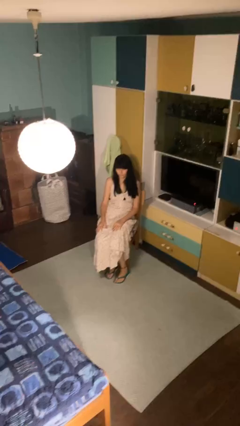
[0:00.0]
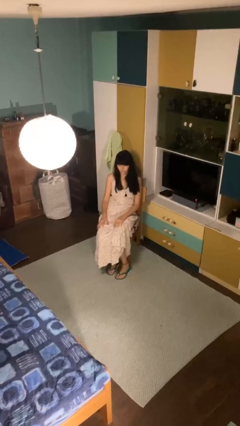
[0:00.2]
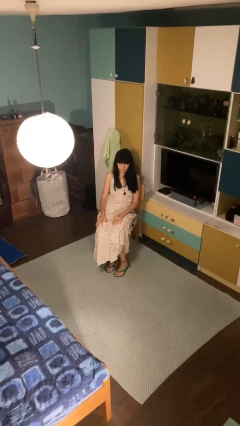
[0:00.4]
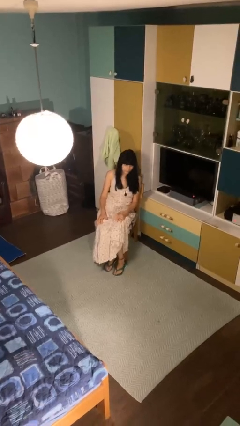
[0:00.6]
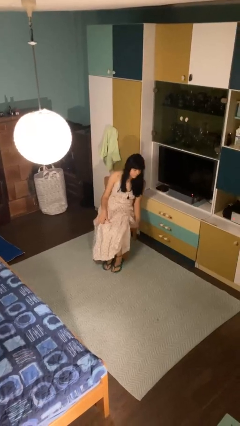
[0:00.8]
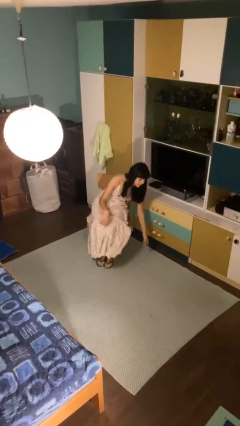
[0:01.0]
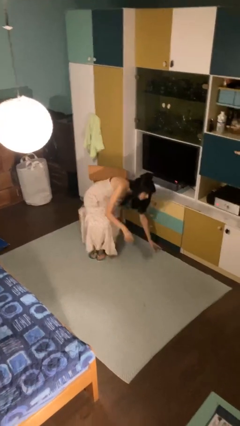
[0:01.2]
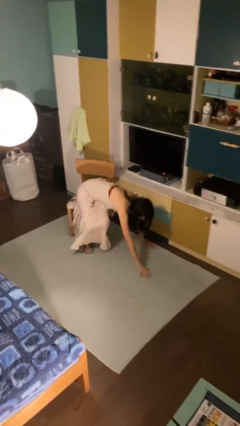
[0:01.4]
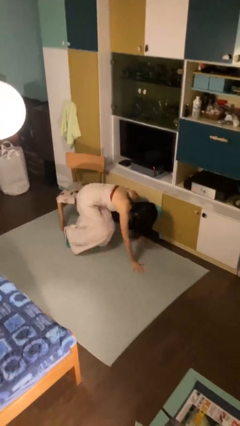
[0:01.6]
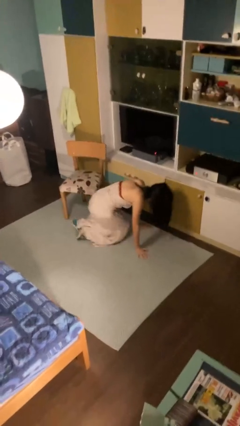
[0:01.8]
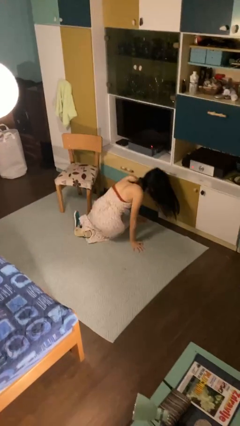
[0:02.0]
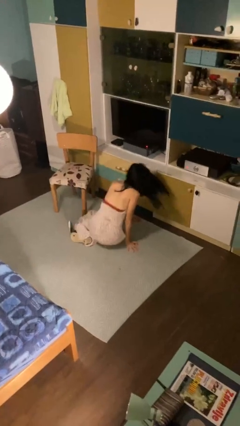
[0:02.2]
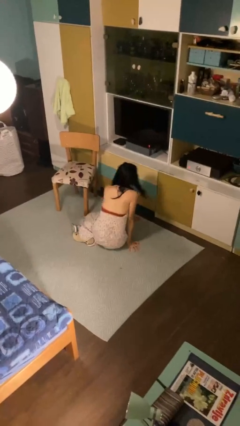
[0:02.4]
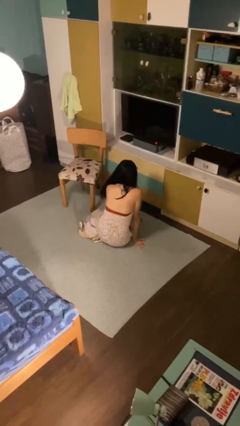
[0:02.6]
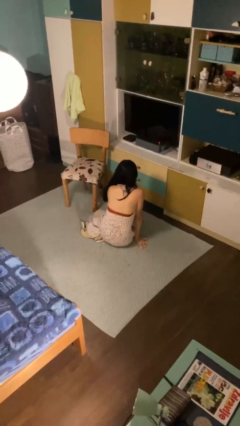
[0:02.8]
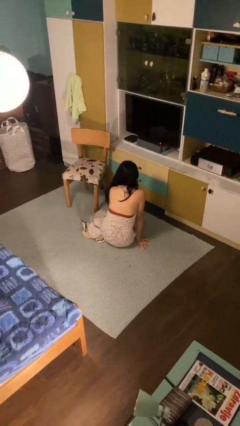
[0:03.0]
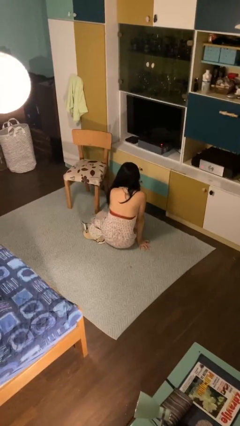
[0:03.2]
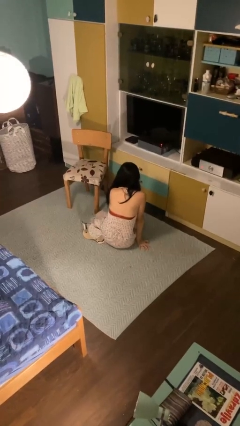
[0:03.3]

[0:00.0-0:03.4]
person falls from chair

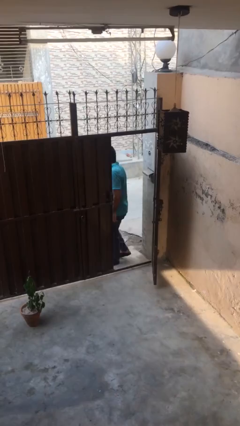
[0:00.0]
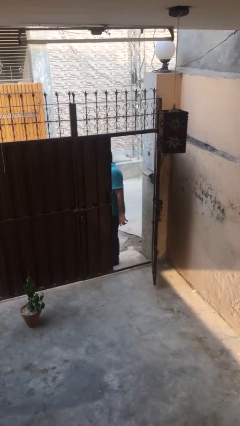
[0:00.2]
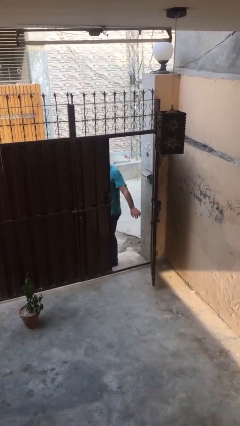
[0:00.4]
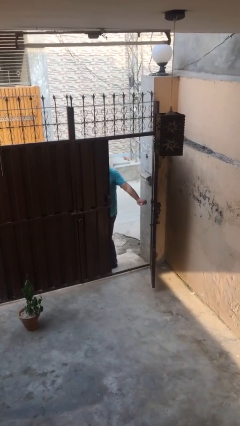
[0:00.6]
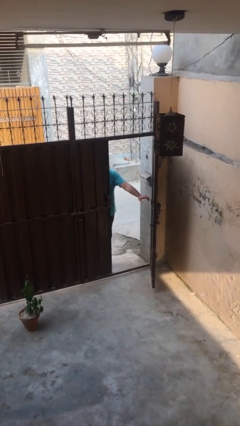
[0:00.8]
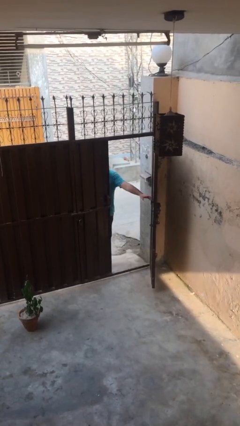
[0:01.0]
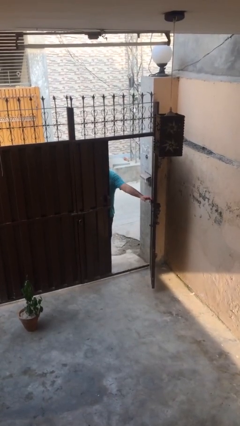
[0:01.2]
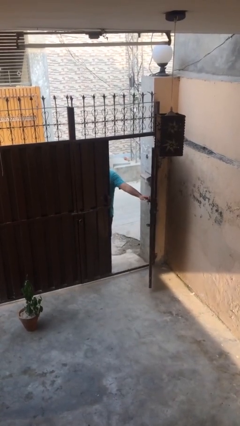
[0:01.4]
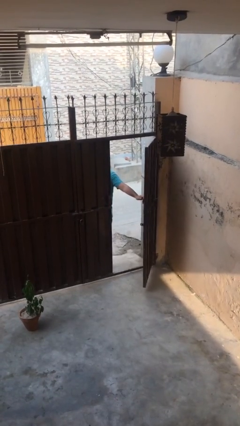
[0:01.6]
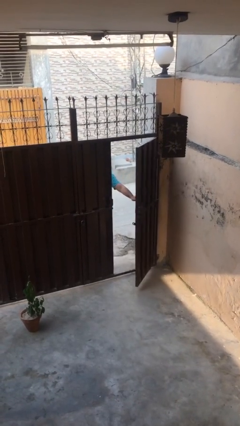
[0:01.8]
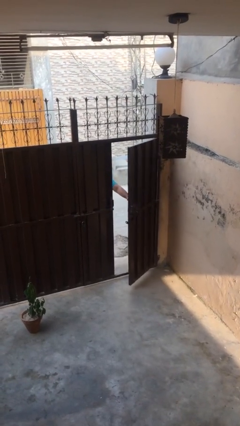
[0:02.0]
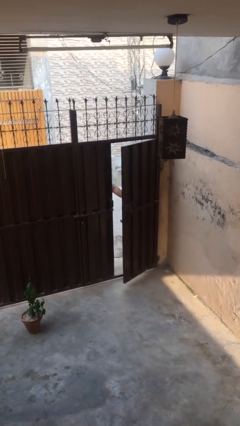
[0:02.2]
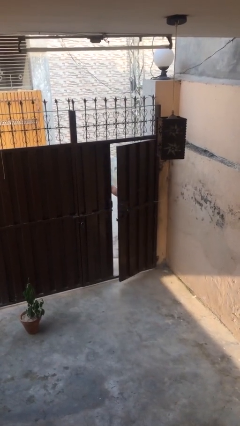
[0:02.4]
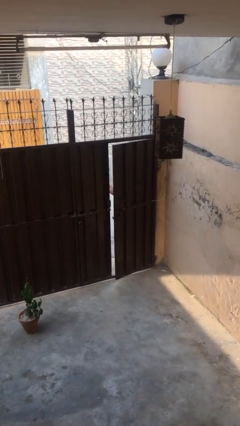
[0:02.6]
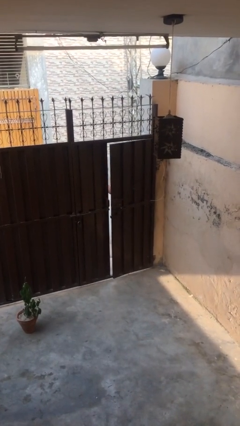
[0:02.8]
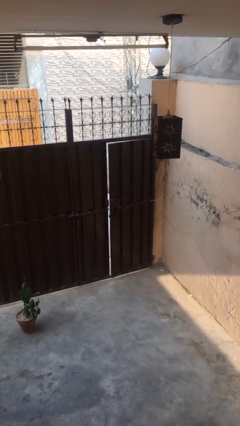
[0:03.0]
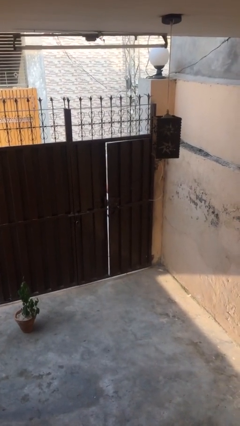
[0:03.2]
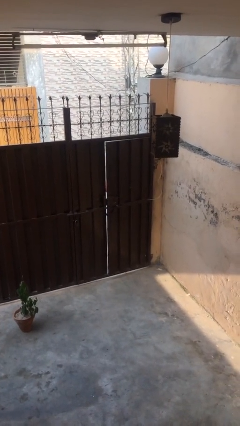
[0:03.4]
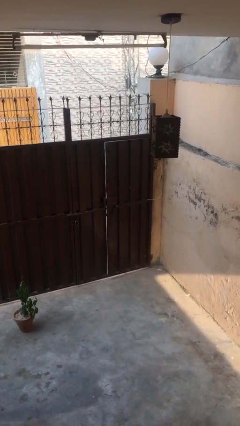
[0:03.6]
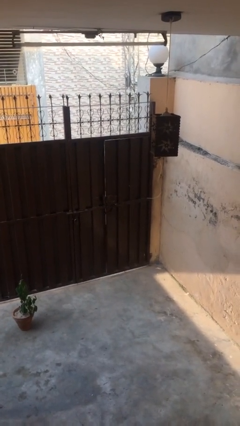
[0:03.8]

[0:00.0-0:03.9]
person closes facility door

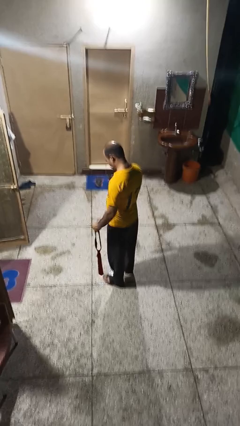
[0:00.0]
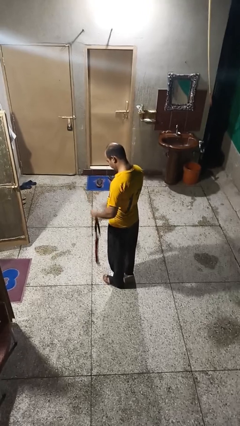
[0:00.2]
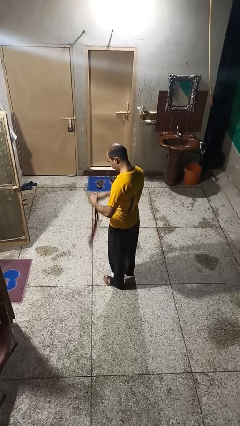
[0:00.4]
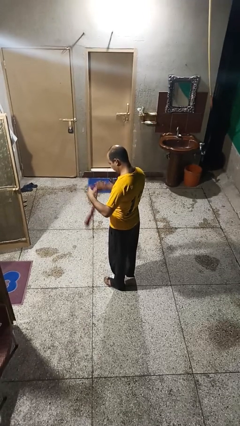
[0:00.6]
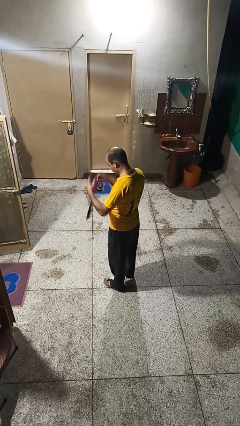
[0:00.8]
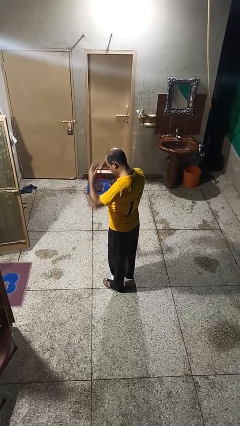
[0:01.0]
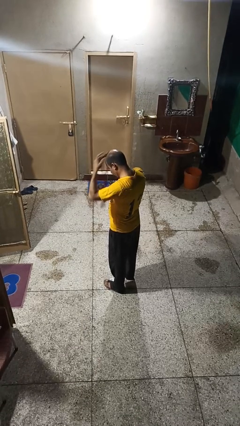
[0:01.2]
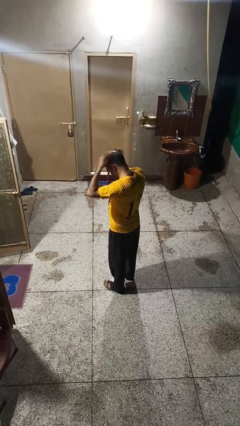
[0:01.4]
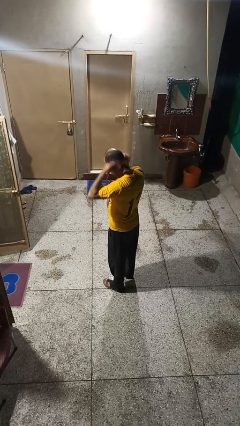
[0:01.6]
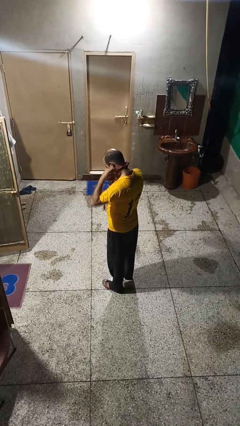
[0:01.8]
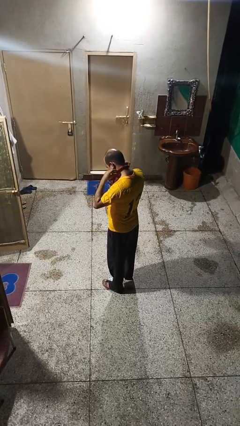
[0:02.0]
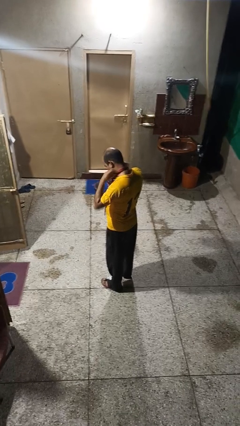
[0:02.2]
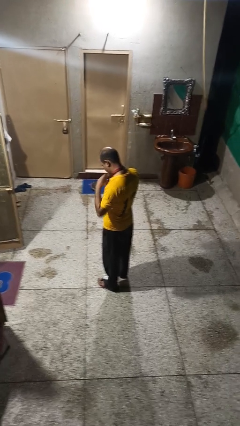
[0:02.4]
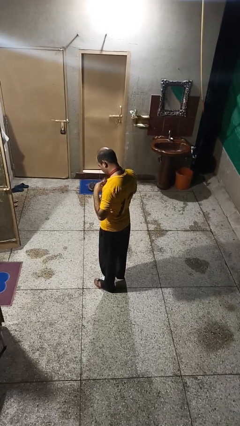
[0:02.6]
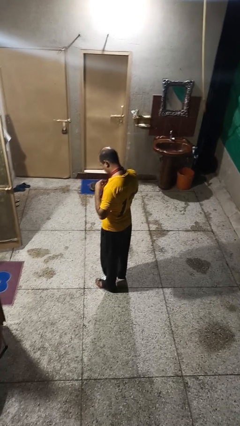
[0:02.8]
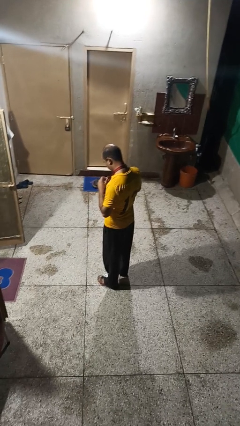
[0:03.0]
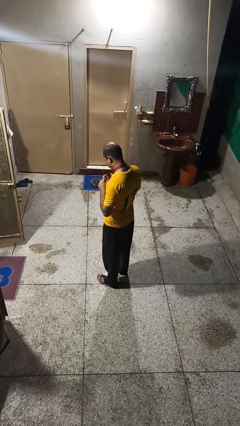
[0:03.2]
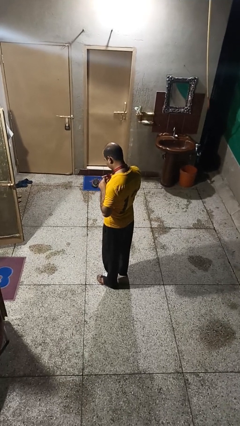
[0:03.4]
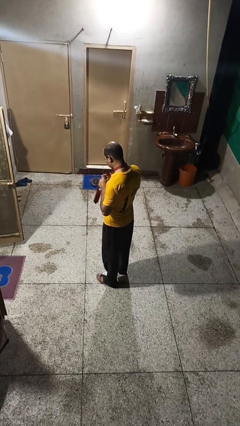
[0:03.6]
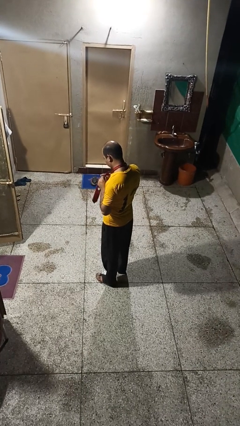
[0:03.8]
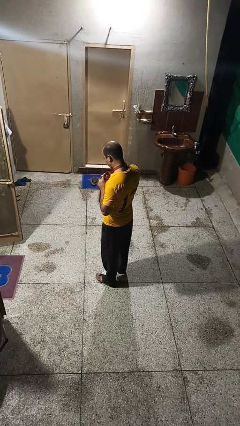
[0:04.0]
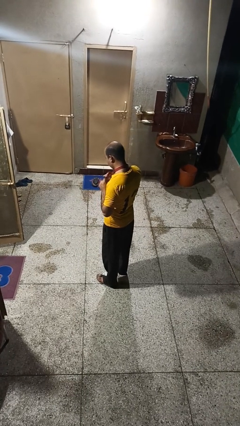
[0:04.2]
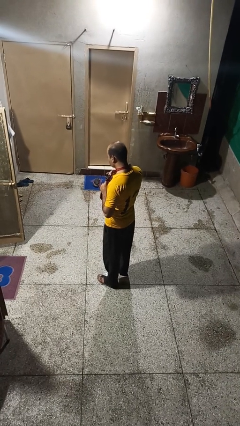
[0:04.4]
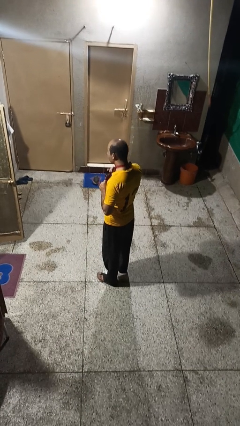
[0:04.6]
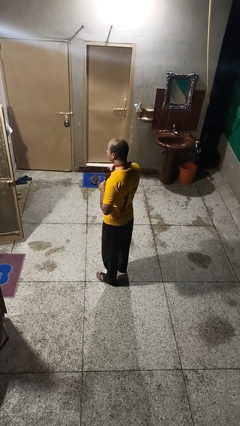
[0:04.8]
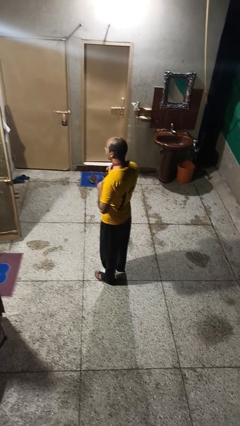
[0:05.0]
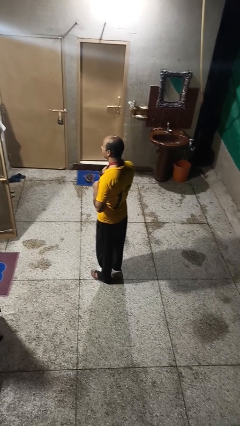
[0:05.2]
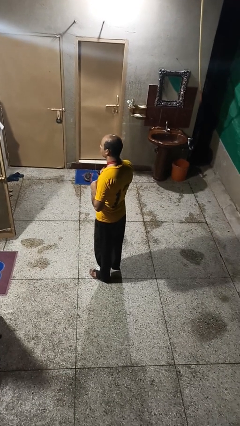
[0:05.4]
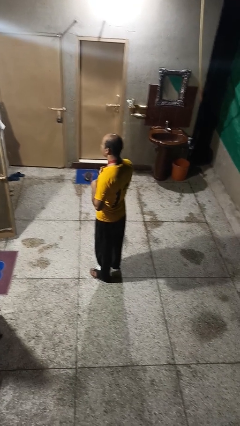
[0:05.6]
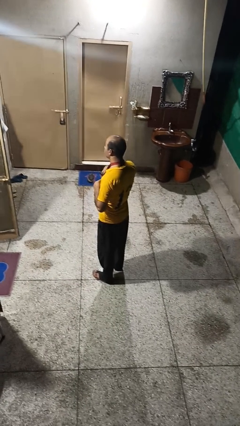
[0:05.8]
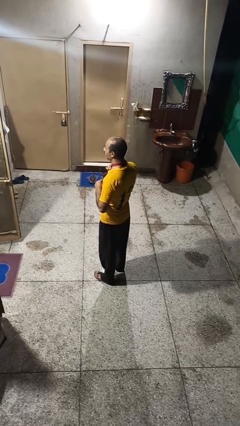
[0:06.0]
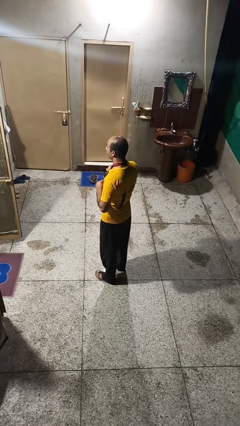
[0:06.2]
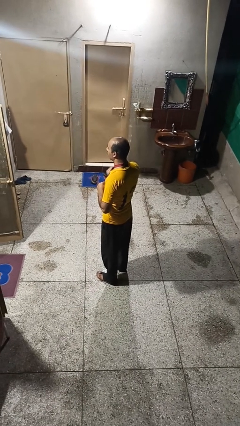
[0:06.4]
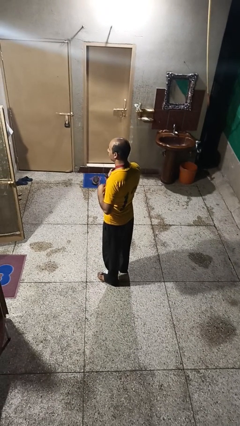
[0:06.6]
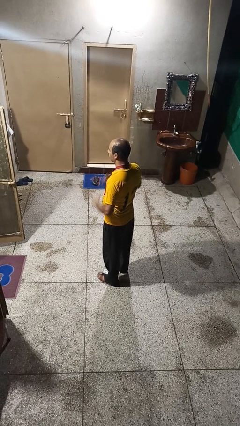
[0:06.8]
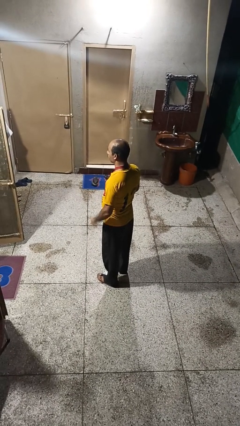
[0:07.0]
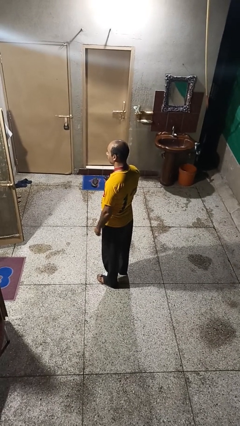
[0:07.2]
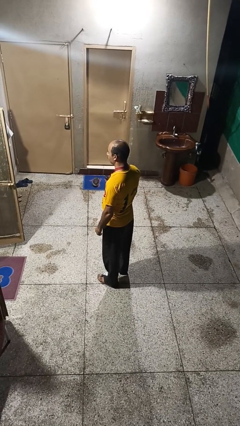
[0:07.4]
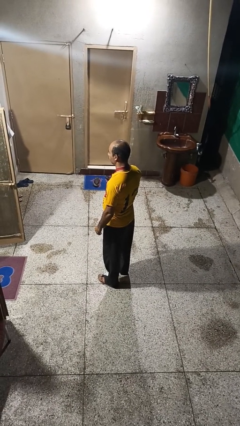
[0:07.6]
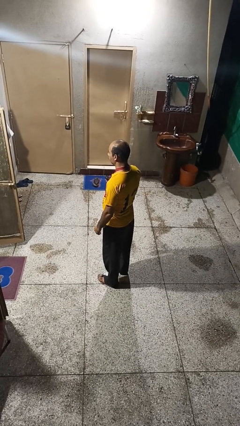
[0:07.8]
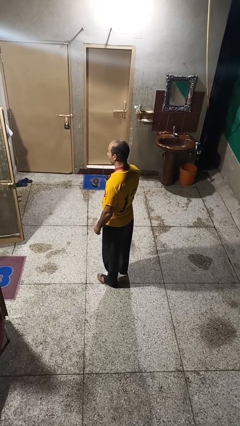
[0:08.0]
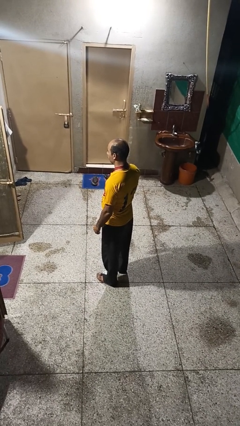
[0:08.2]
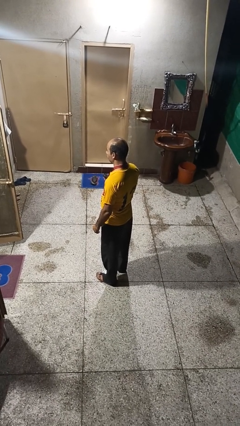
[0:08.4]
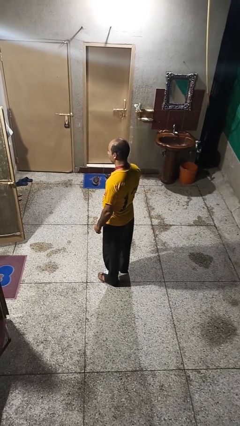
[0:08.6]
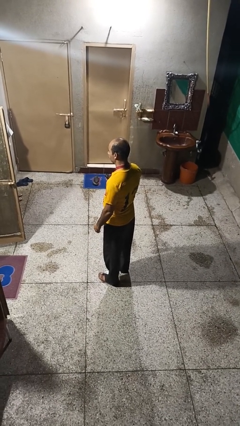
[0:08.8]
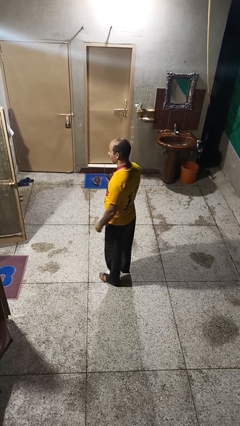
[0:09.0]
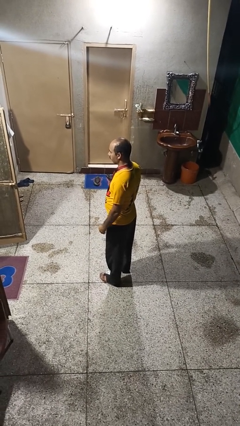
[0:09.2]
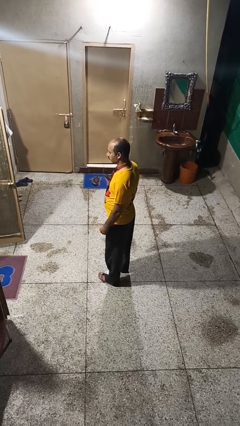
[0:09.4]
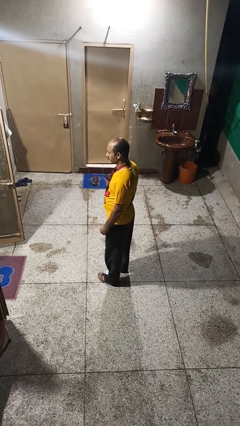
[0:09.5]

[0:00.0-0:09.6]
person puts on necktie

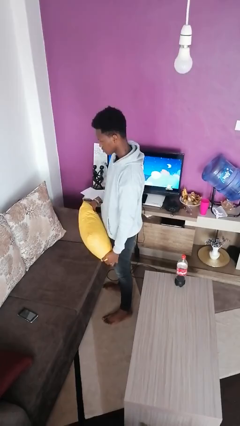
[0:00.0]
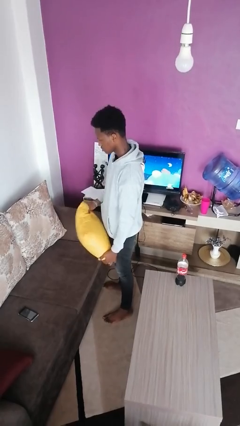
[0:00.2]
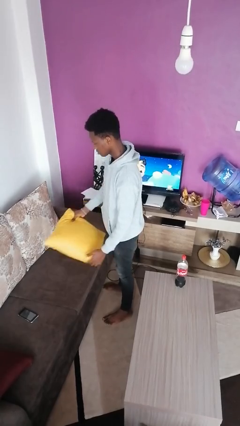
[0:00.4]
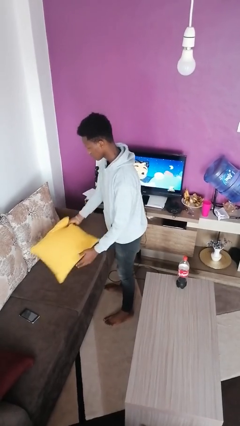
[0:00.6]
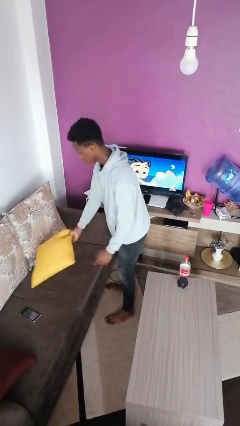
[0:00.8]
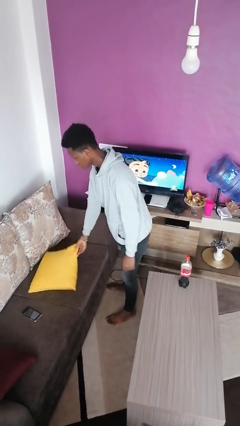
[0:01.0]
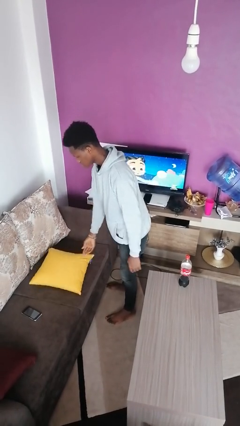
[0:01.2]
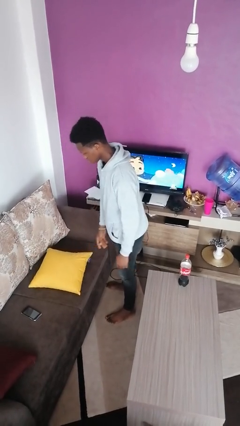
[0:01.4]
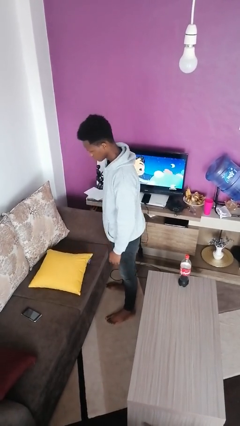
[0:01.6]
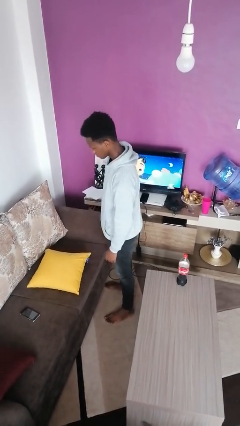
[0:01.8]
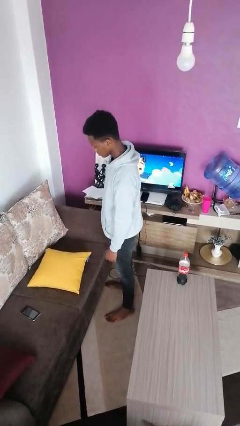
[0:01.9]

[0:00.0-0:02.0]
person puts down object on couch
